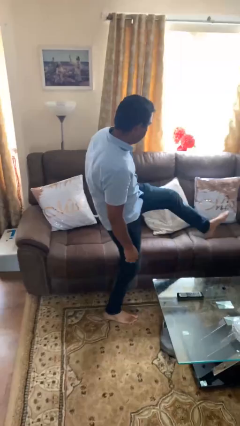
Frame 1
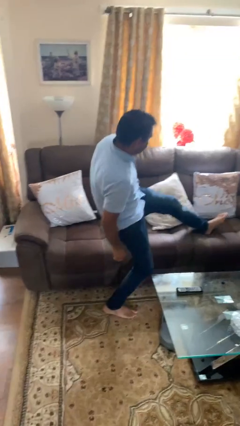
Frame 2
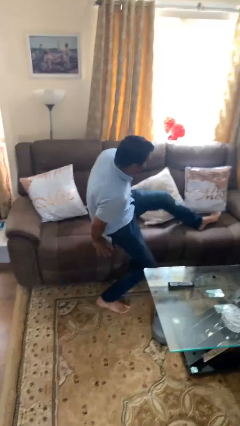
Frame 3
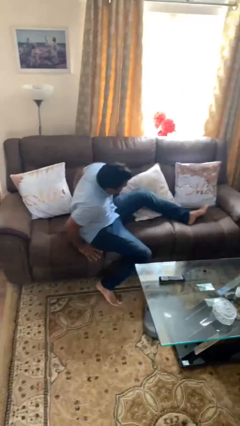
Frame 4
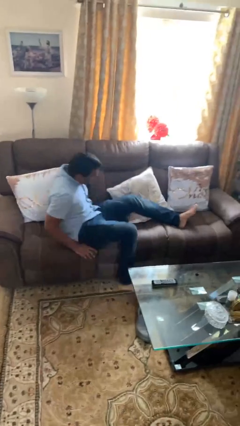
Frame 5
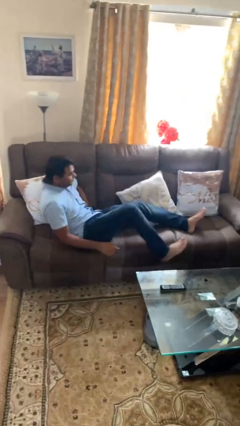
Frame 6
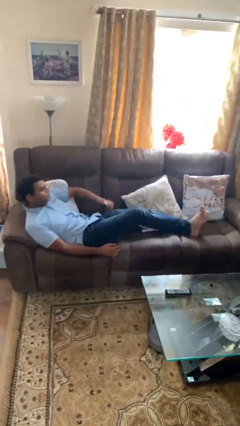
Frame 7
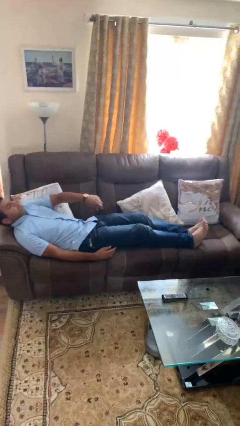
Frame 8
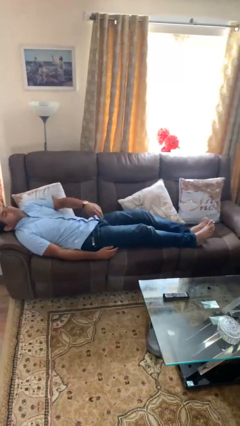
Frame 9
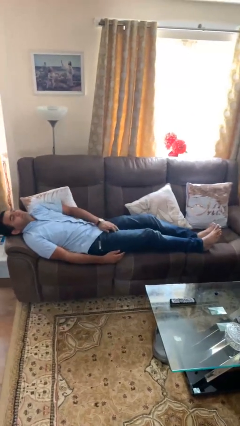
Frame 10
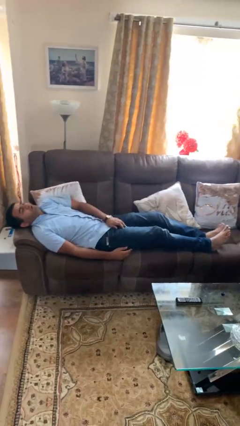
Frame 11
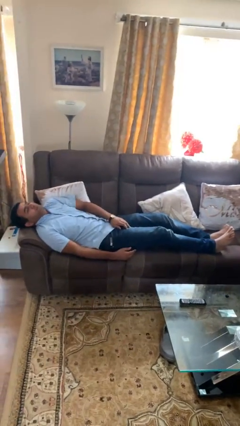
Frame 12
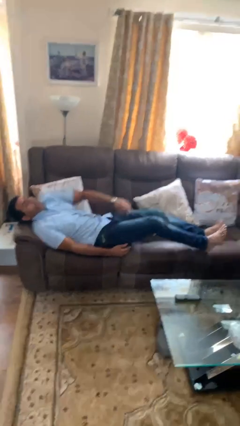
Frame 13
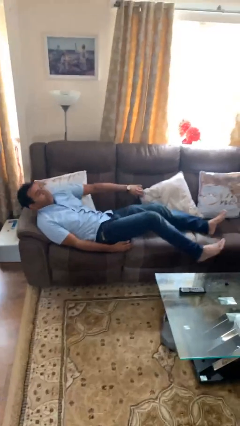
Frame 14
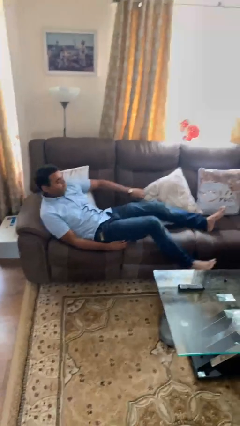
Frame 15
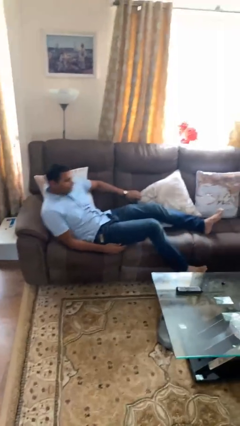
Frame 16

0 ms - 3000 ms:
person lies down on couch

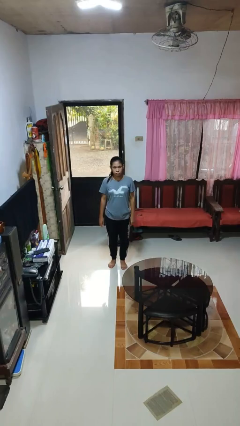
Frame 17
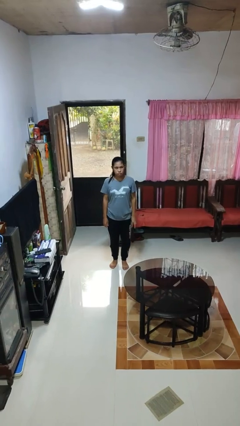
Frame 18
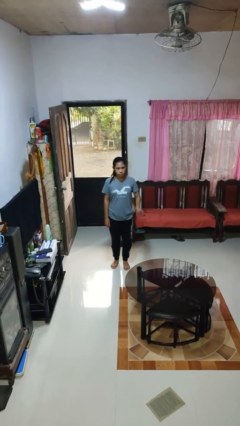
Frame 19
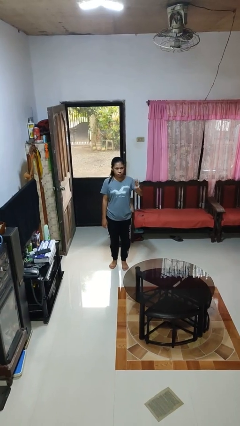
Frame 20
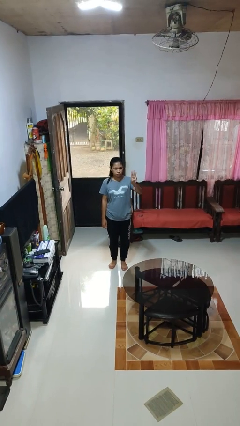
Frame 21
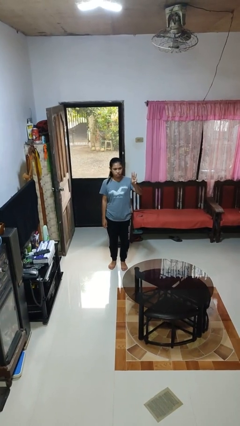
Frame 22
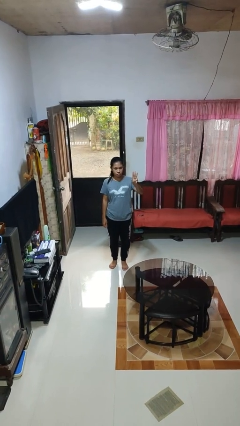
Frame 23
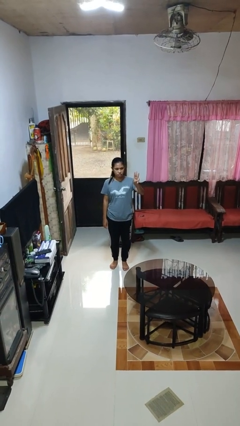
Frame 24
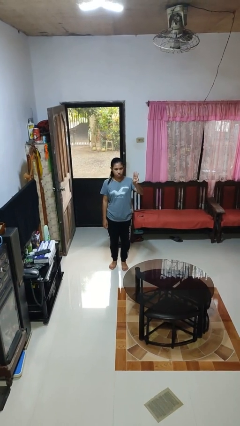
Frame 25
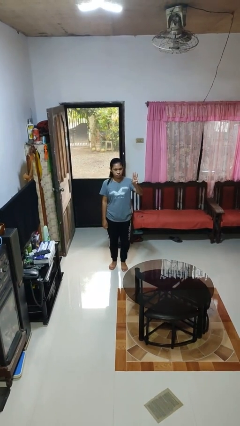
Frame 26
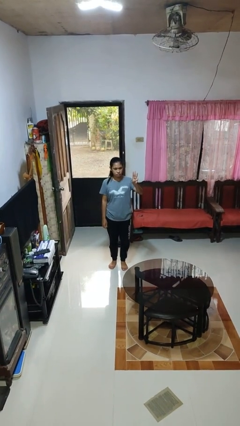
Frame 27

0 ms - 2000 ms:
person gestures number three

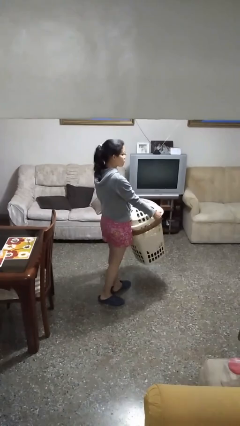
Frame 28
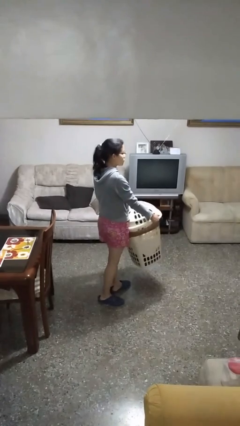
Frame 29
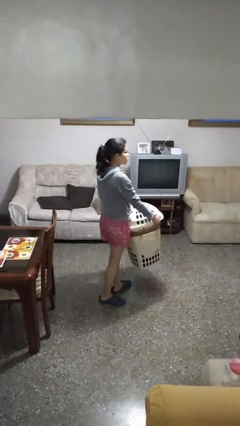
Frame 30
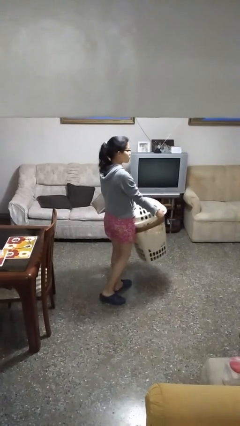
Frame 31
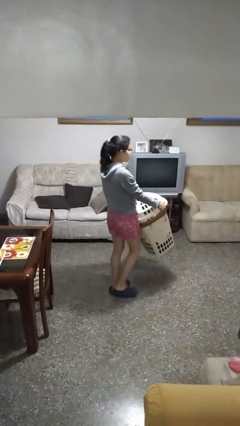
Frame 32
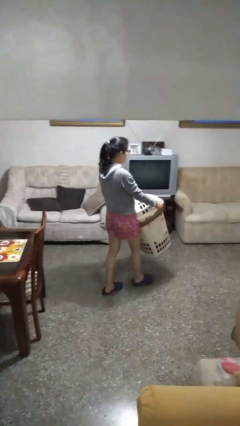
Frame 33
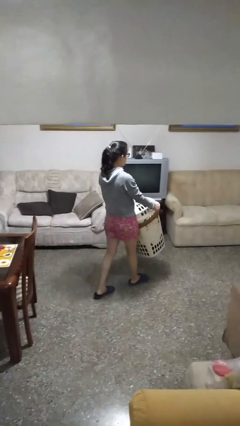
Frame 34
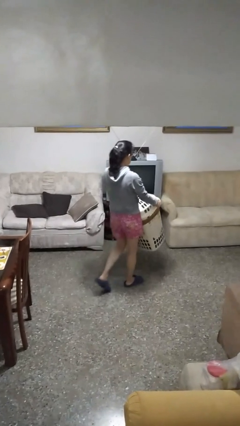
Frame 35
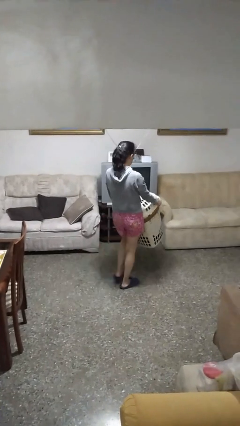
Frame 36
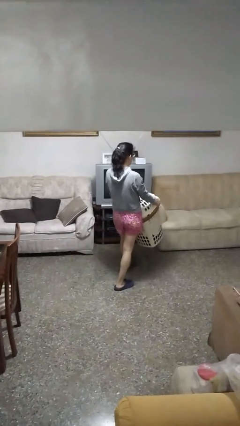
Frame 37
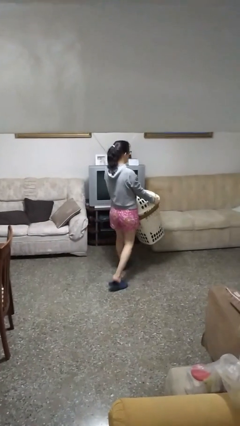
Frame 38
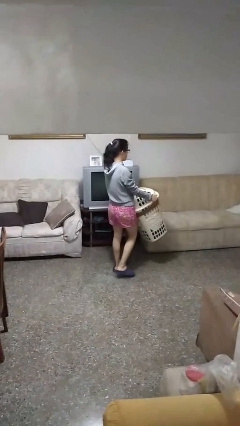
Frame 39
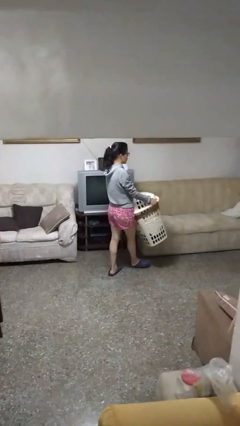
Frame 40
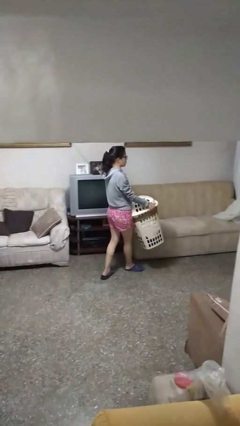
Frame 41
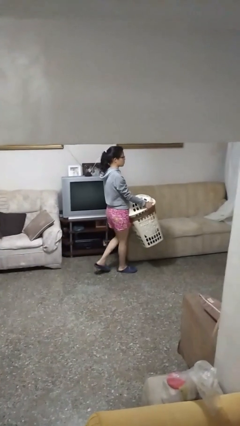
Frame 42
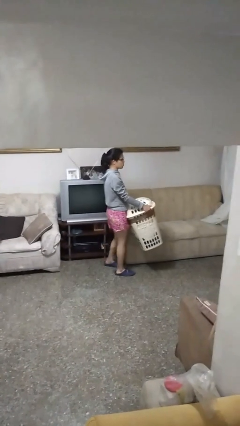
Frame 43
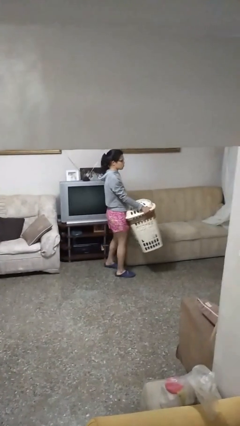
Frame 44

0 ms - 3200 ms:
person carries laundry basket

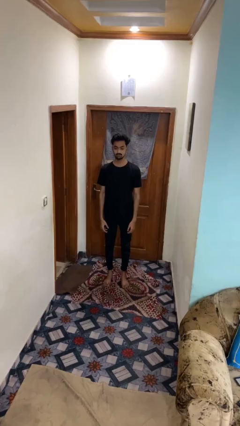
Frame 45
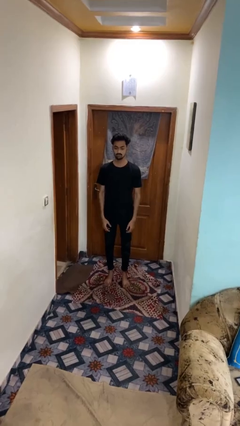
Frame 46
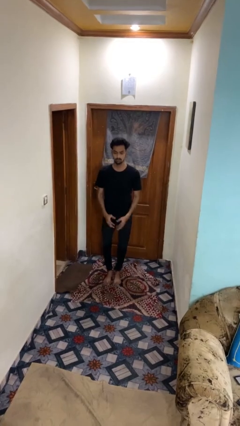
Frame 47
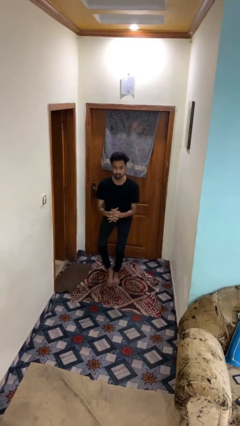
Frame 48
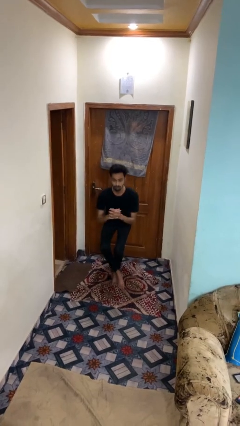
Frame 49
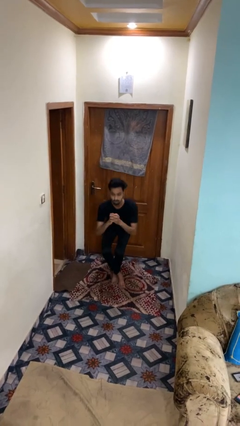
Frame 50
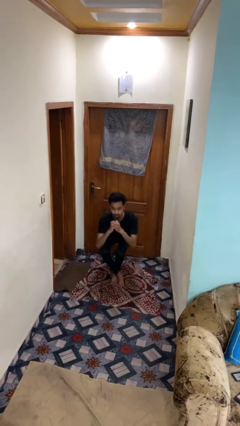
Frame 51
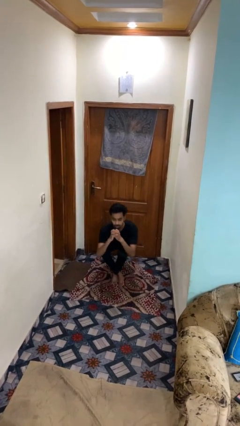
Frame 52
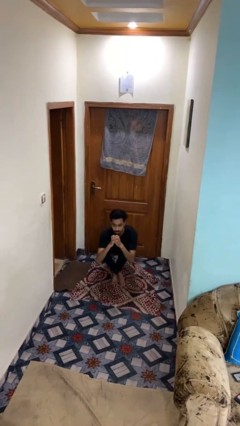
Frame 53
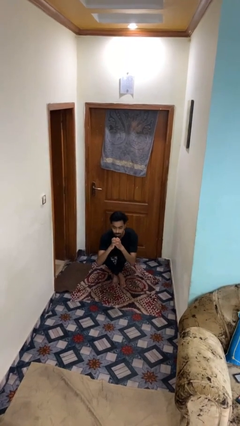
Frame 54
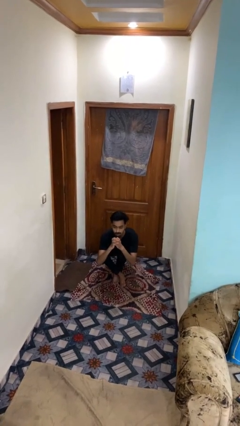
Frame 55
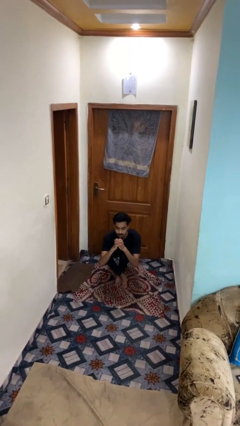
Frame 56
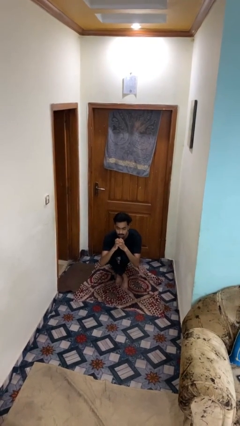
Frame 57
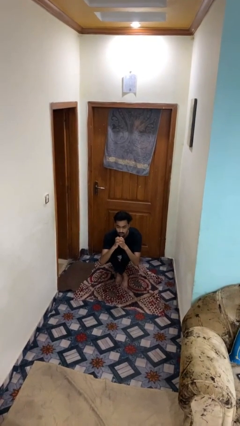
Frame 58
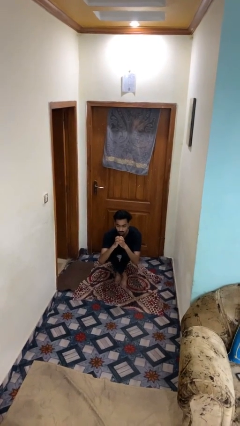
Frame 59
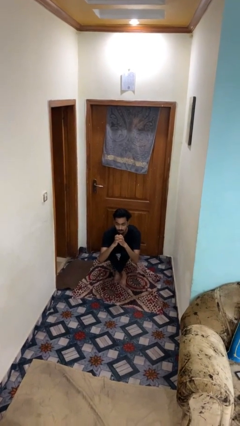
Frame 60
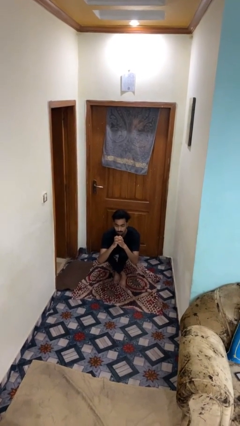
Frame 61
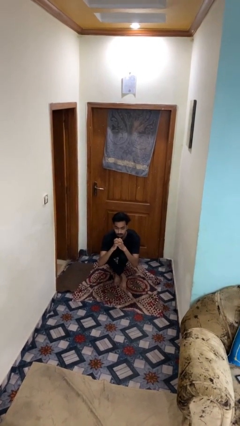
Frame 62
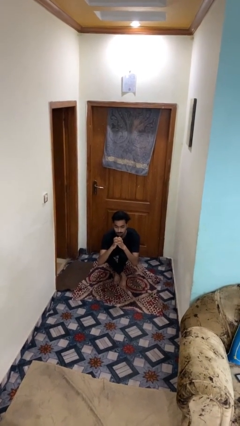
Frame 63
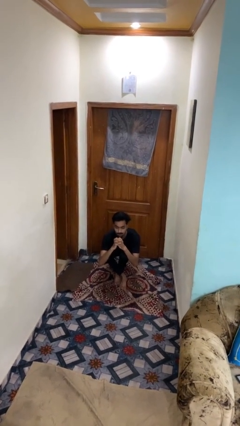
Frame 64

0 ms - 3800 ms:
person sits crisscross

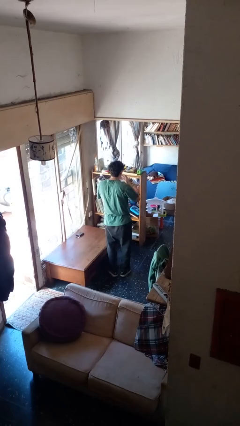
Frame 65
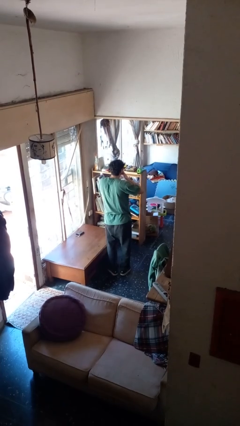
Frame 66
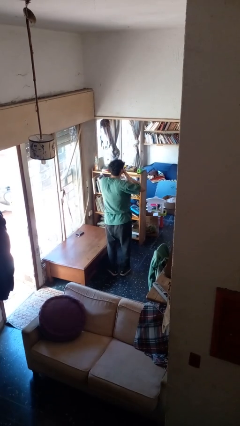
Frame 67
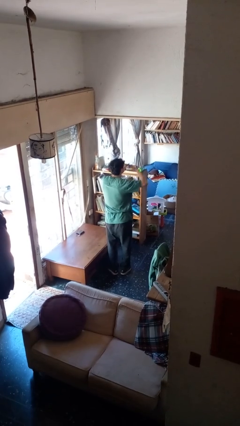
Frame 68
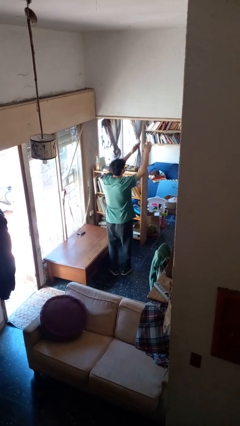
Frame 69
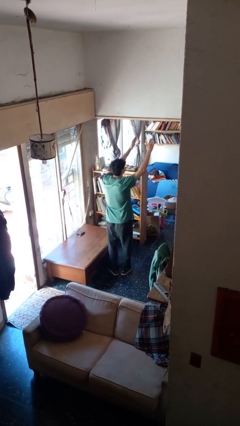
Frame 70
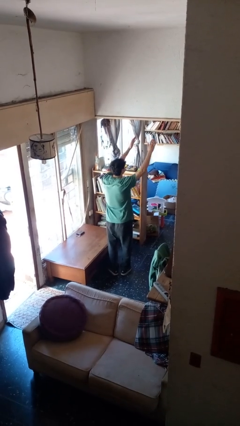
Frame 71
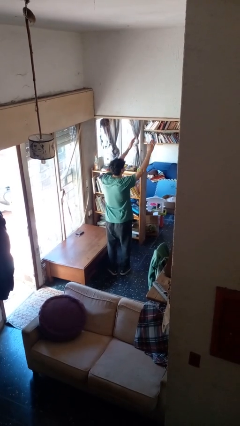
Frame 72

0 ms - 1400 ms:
person gestures blow kiss

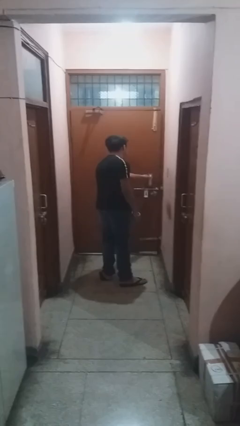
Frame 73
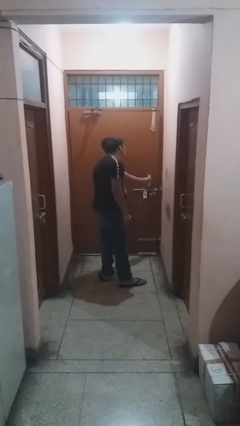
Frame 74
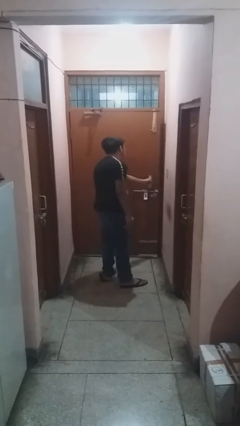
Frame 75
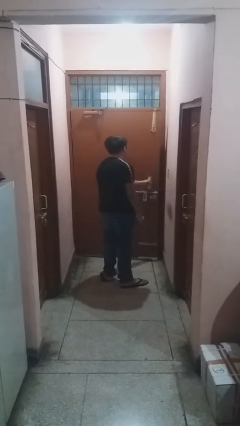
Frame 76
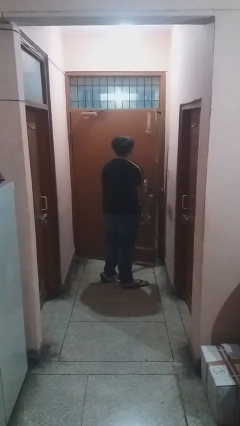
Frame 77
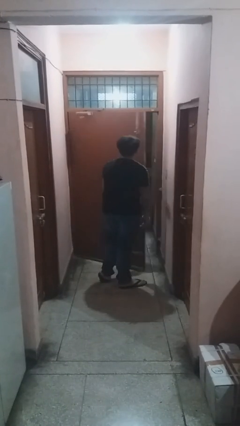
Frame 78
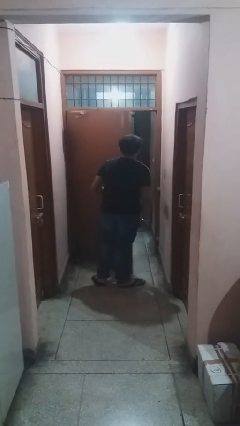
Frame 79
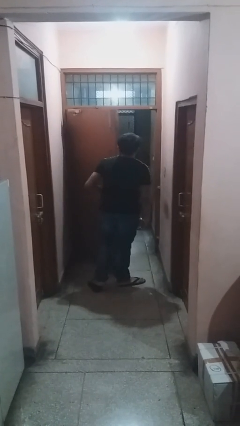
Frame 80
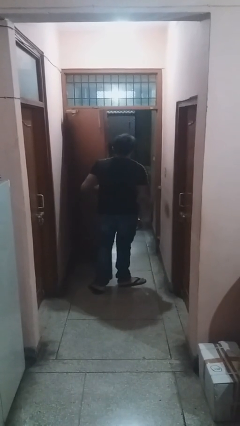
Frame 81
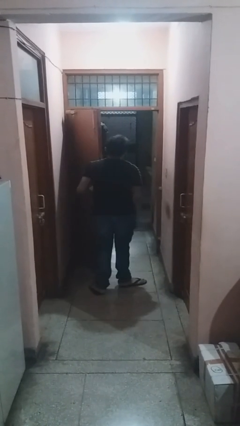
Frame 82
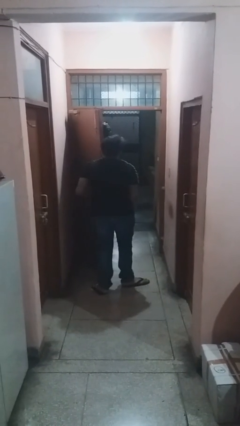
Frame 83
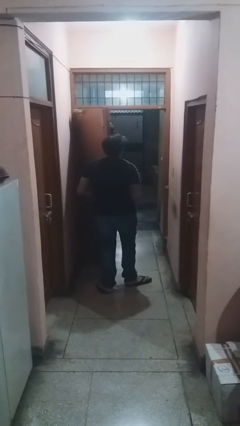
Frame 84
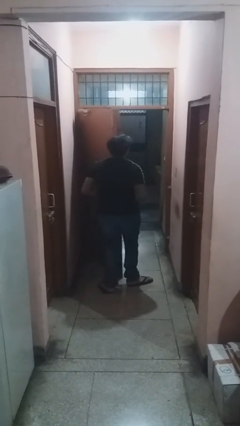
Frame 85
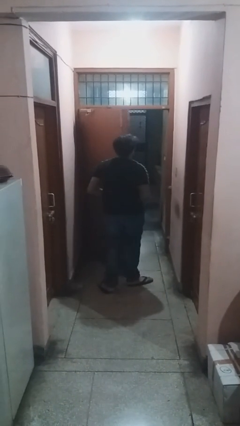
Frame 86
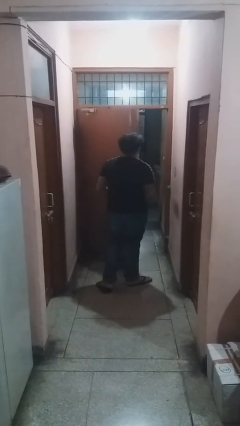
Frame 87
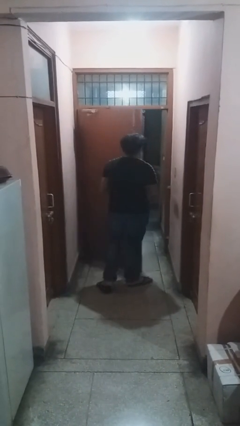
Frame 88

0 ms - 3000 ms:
person opens facility door

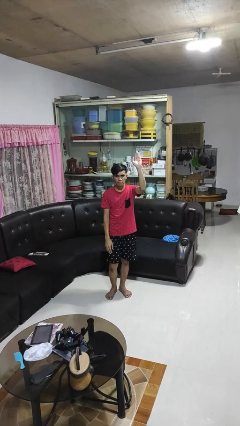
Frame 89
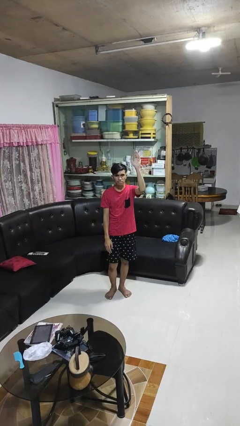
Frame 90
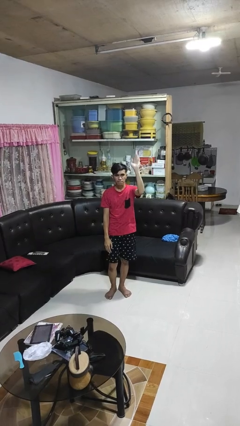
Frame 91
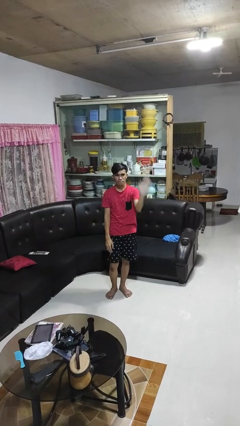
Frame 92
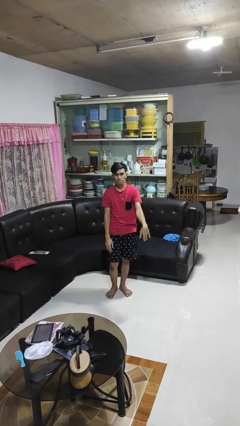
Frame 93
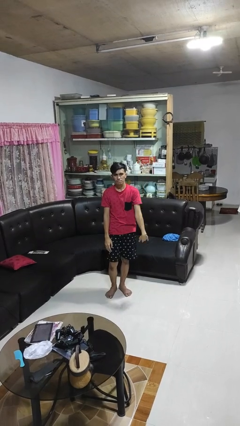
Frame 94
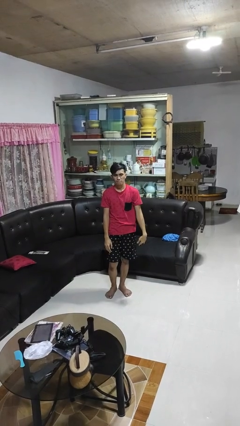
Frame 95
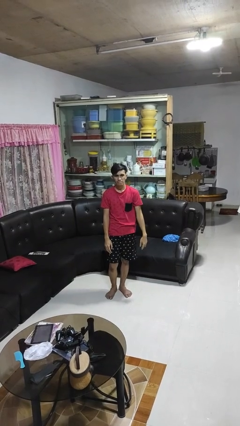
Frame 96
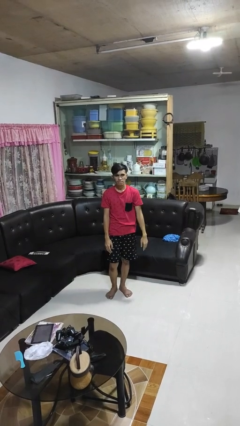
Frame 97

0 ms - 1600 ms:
person gestures swipe down
